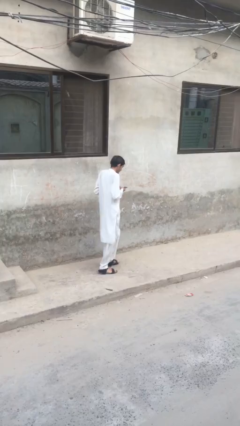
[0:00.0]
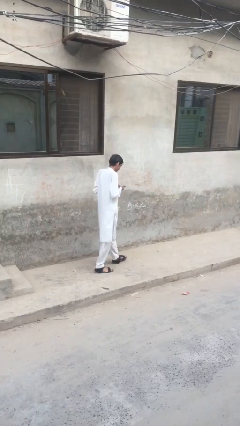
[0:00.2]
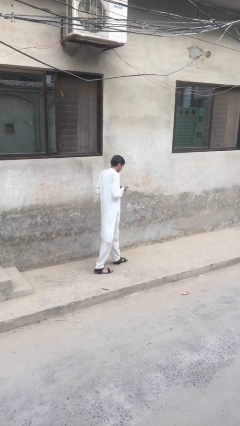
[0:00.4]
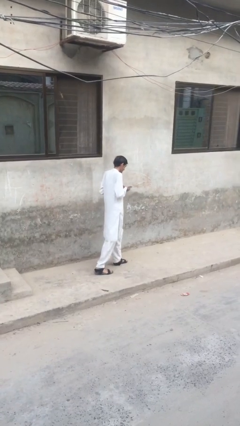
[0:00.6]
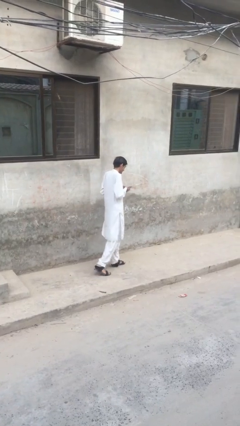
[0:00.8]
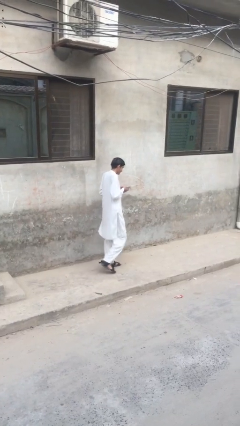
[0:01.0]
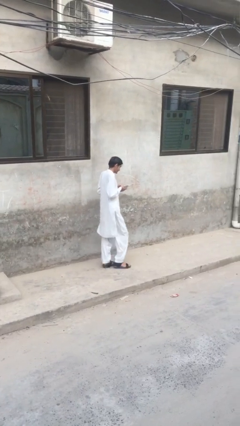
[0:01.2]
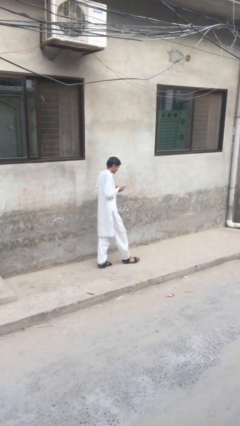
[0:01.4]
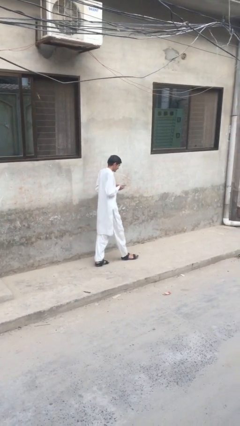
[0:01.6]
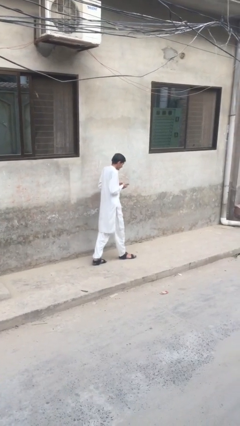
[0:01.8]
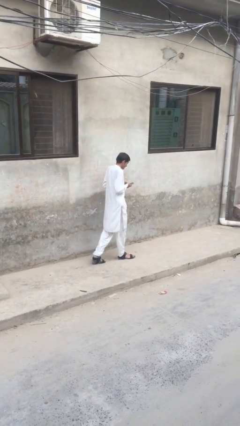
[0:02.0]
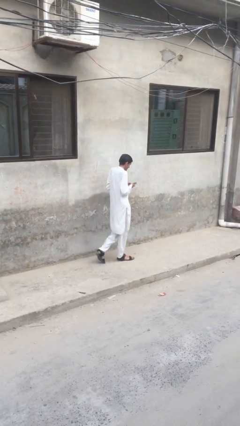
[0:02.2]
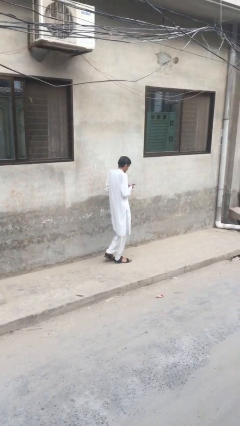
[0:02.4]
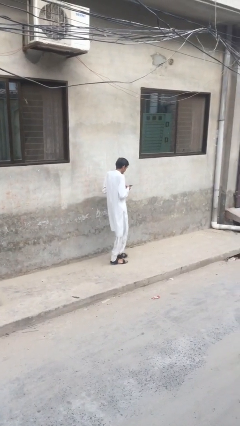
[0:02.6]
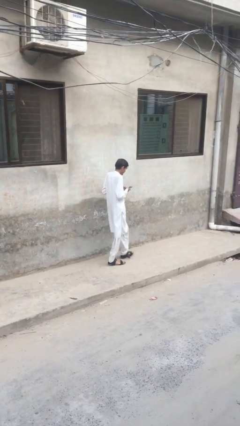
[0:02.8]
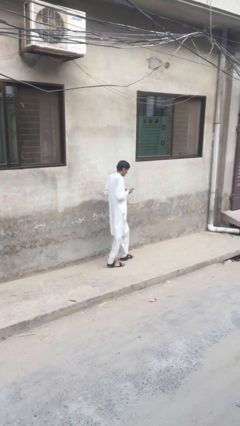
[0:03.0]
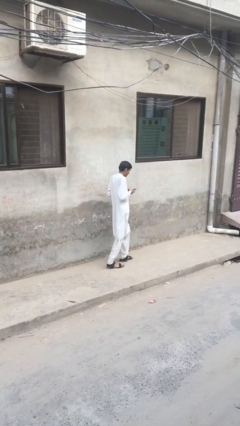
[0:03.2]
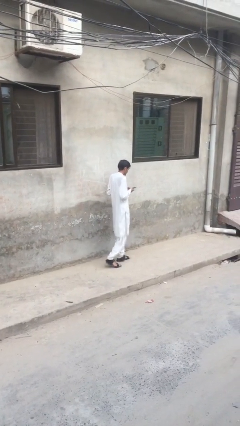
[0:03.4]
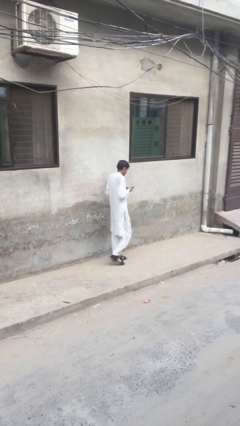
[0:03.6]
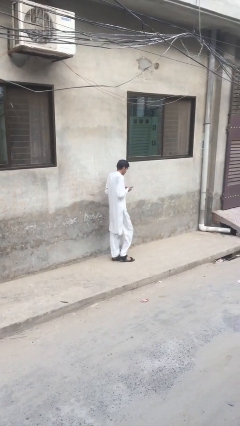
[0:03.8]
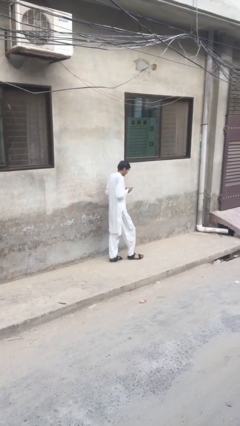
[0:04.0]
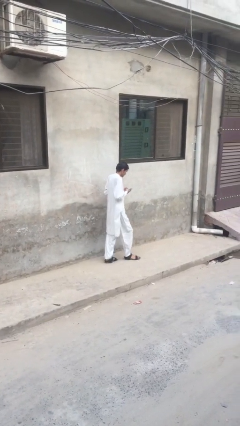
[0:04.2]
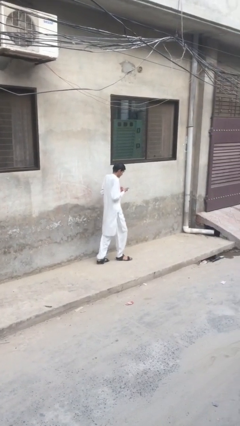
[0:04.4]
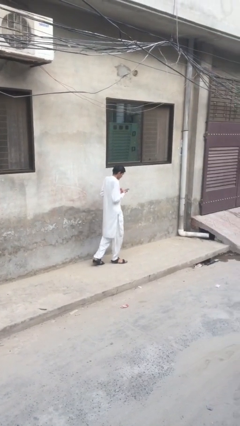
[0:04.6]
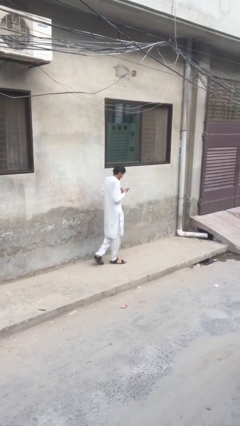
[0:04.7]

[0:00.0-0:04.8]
person texts on phone

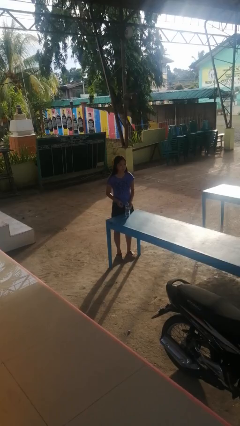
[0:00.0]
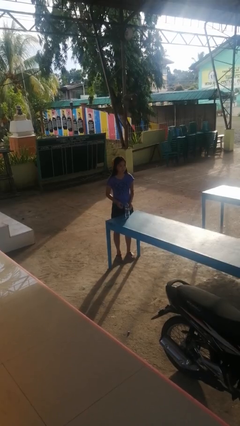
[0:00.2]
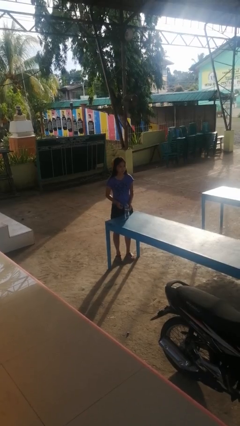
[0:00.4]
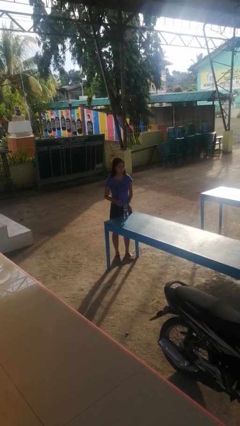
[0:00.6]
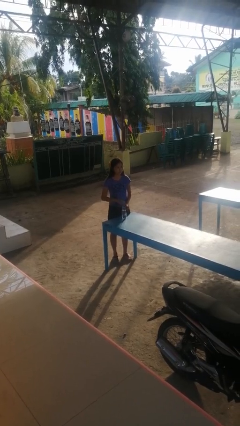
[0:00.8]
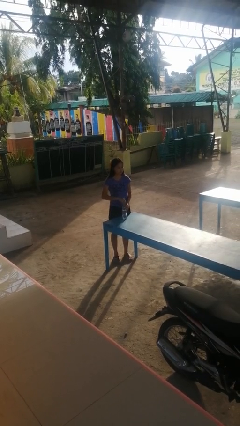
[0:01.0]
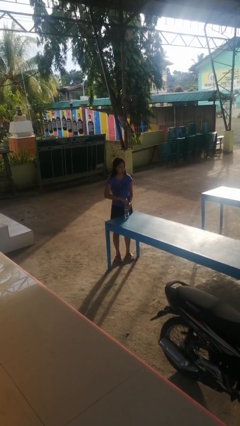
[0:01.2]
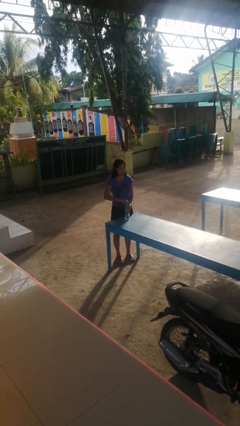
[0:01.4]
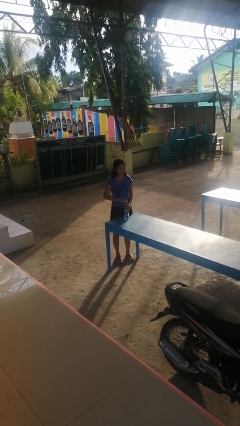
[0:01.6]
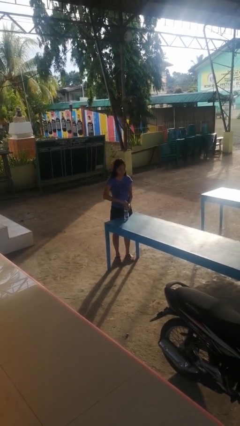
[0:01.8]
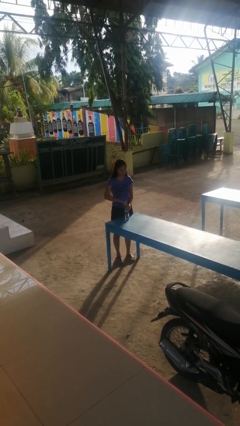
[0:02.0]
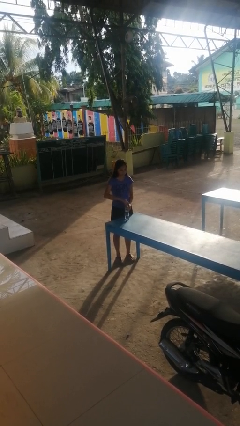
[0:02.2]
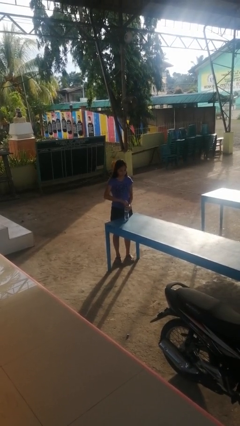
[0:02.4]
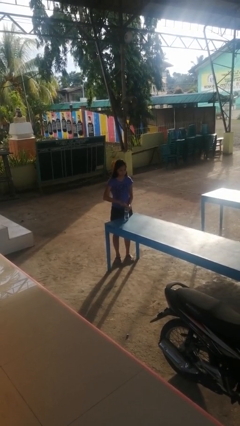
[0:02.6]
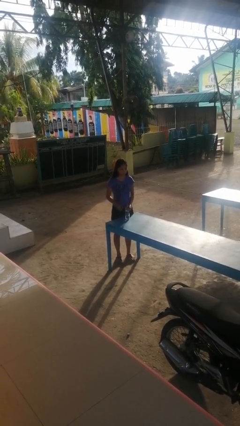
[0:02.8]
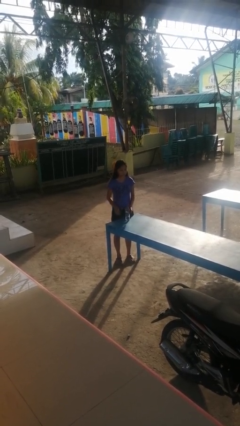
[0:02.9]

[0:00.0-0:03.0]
person screws lid to bottle

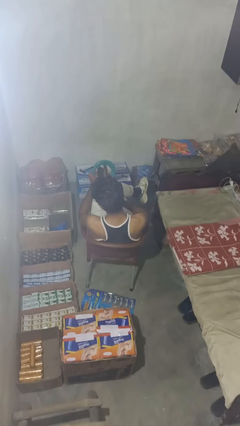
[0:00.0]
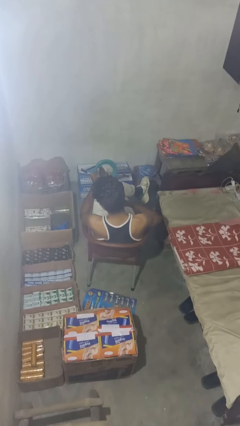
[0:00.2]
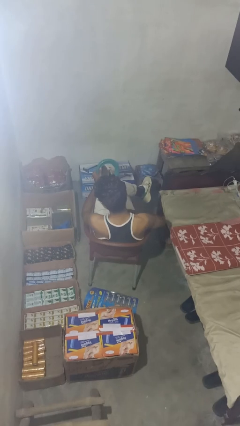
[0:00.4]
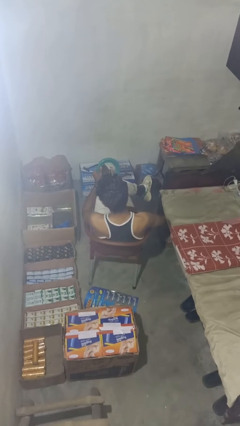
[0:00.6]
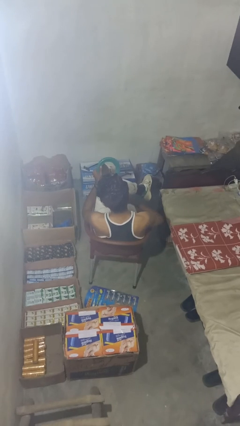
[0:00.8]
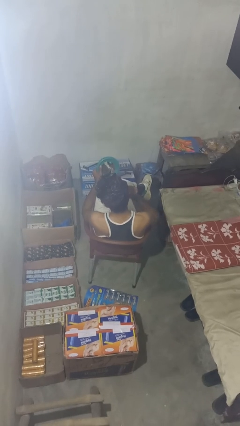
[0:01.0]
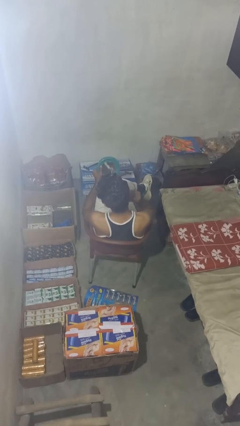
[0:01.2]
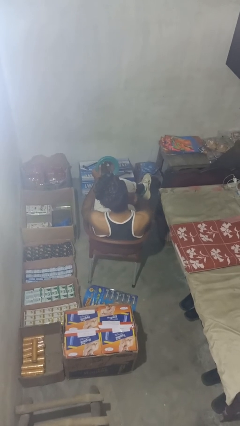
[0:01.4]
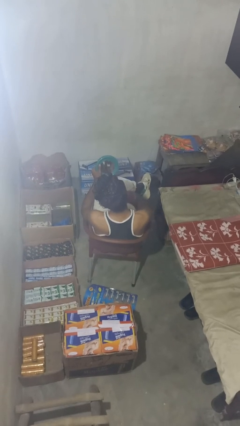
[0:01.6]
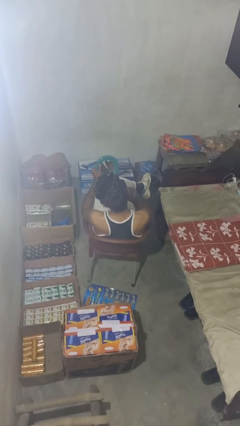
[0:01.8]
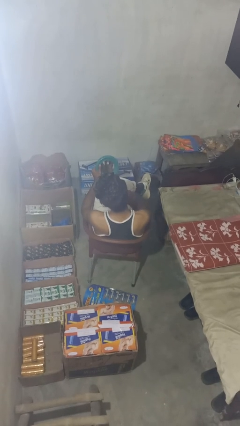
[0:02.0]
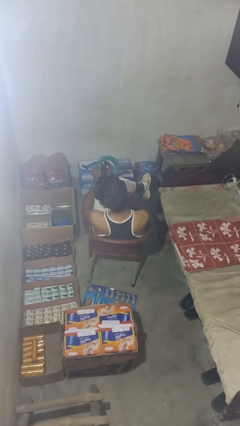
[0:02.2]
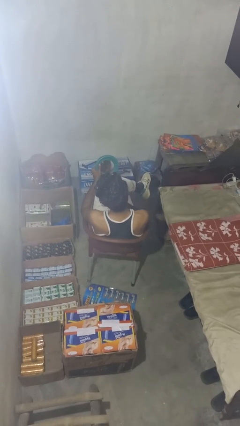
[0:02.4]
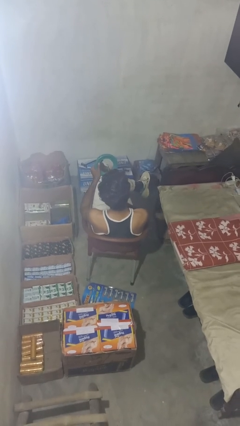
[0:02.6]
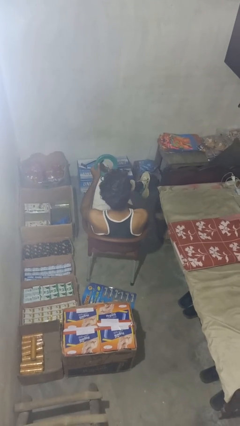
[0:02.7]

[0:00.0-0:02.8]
person shaves face

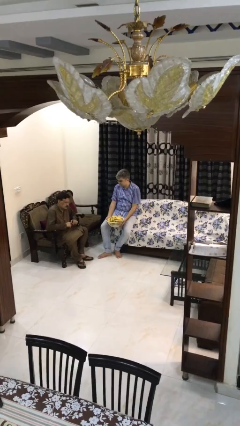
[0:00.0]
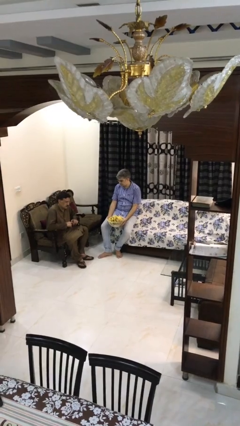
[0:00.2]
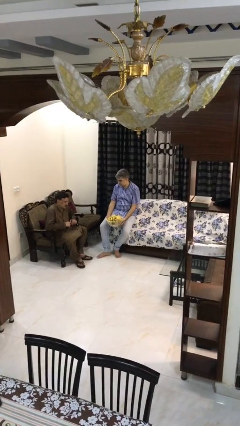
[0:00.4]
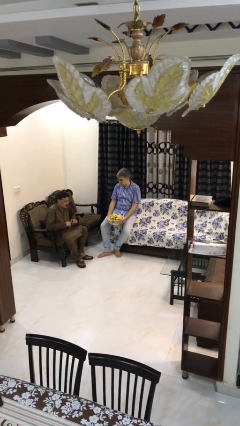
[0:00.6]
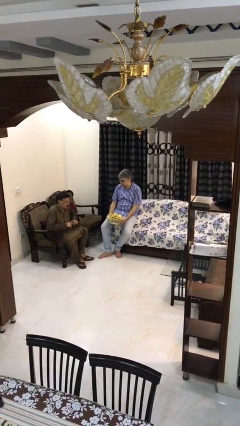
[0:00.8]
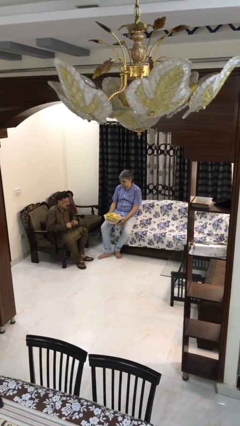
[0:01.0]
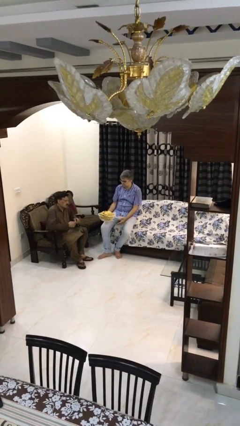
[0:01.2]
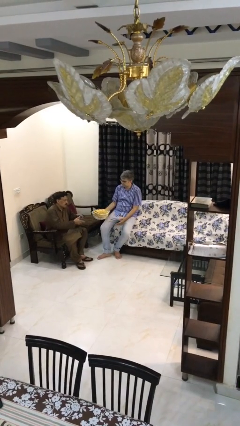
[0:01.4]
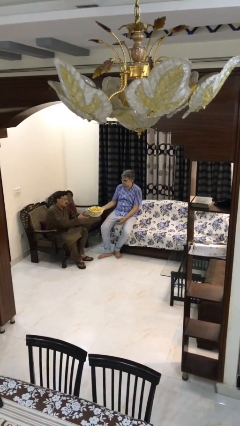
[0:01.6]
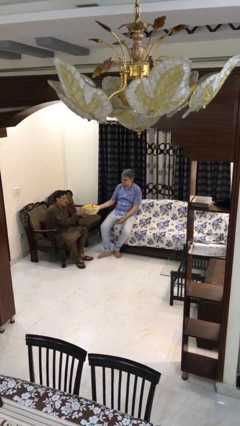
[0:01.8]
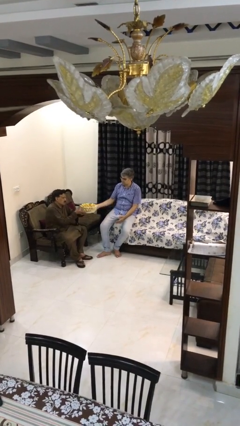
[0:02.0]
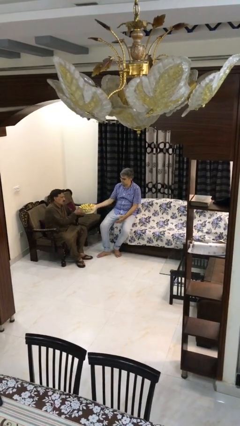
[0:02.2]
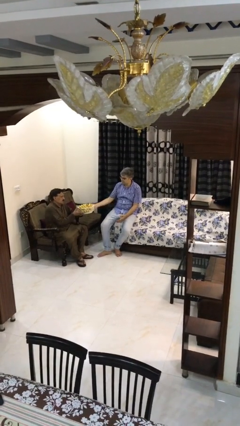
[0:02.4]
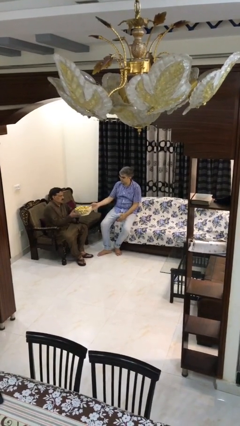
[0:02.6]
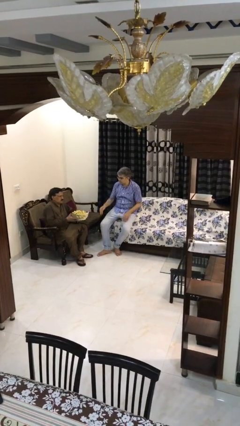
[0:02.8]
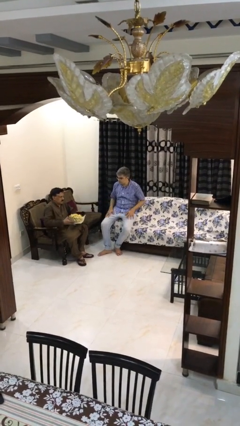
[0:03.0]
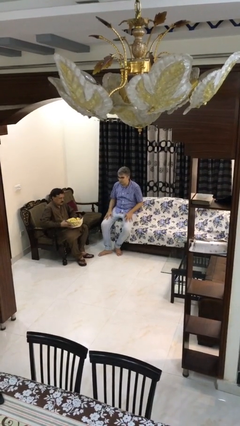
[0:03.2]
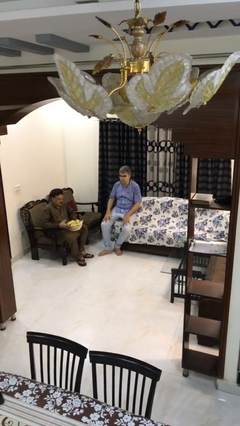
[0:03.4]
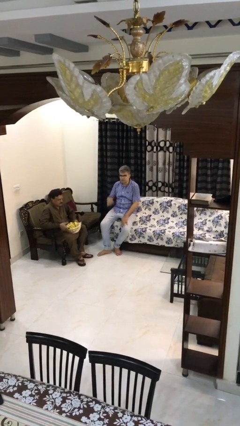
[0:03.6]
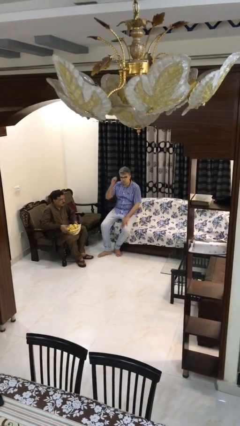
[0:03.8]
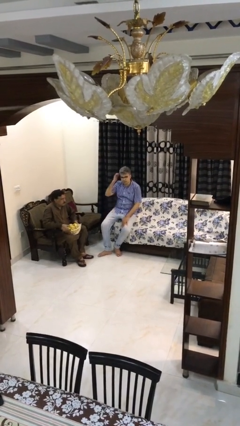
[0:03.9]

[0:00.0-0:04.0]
person transfers object to person

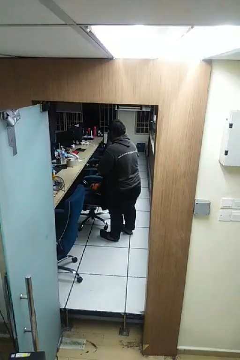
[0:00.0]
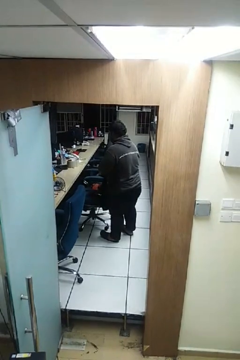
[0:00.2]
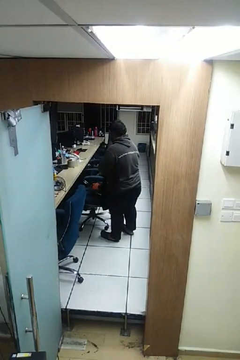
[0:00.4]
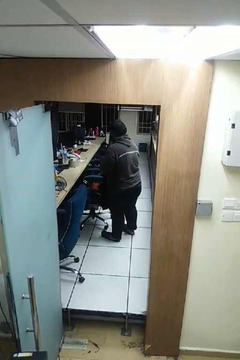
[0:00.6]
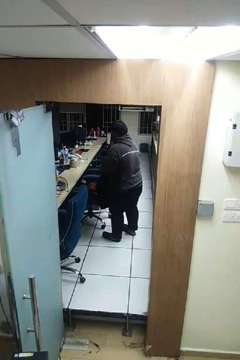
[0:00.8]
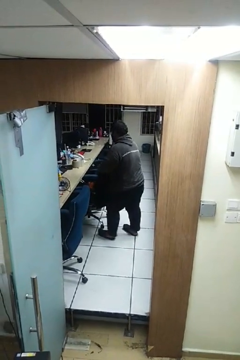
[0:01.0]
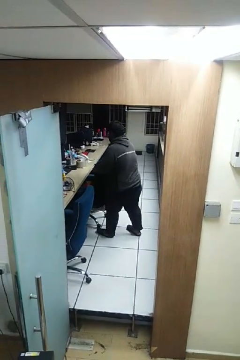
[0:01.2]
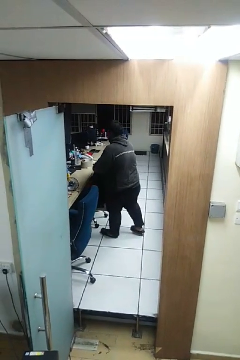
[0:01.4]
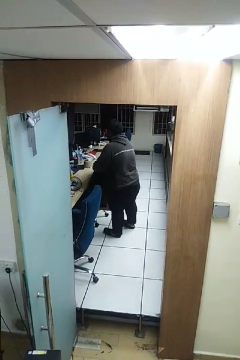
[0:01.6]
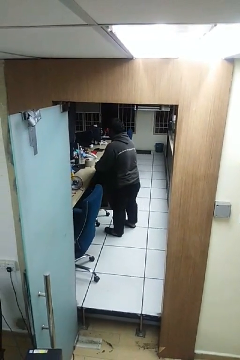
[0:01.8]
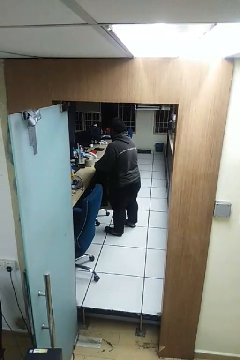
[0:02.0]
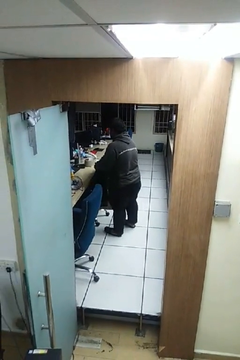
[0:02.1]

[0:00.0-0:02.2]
person pushes in chair

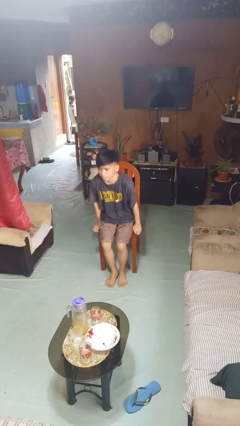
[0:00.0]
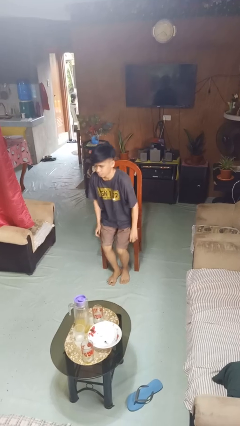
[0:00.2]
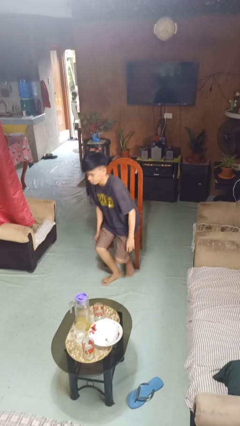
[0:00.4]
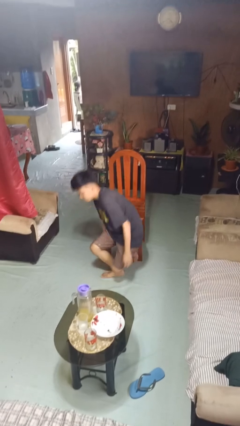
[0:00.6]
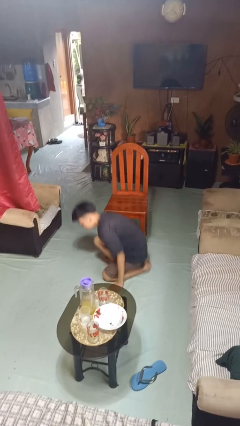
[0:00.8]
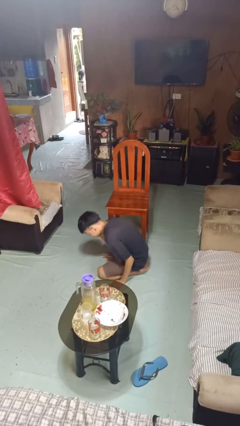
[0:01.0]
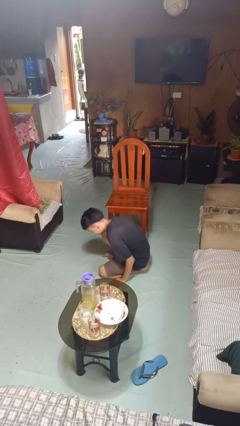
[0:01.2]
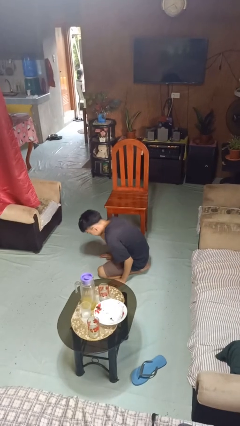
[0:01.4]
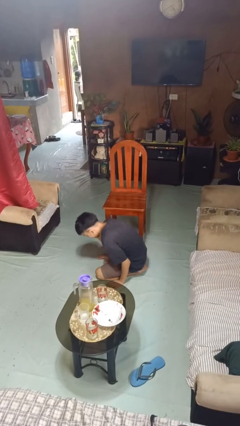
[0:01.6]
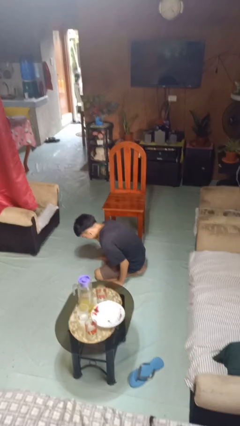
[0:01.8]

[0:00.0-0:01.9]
person falls from chair
